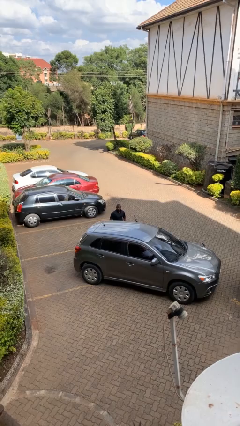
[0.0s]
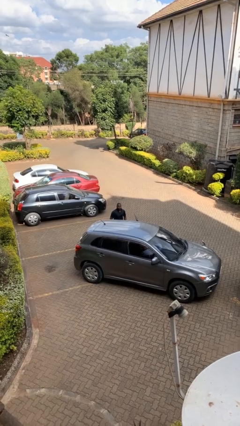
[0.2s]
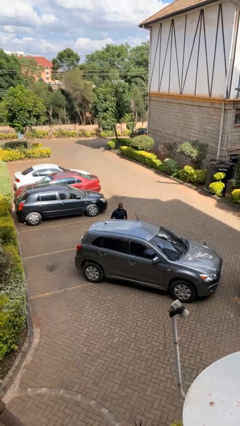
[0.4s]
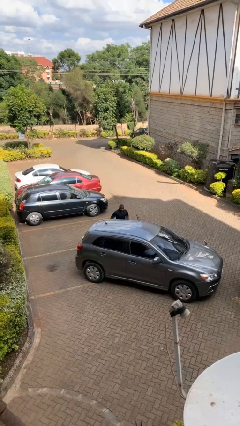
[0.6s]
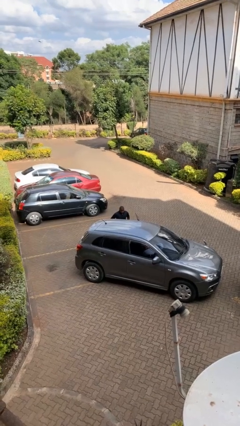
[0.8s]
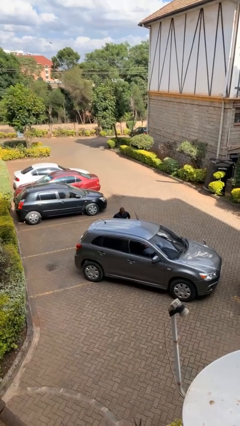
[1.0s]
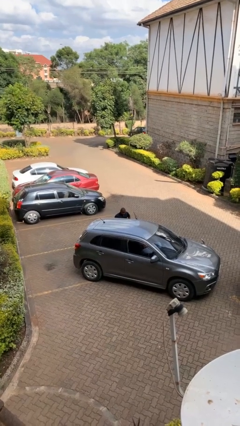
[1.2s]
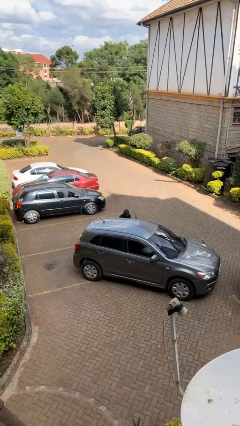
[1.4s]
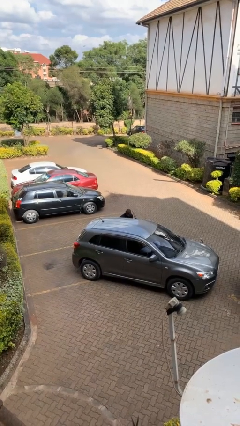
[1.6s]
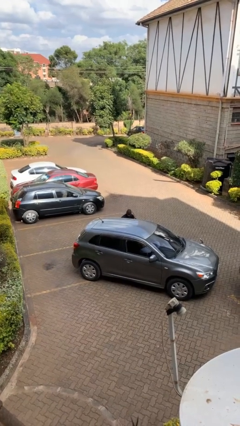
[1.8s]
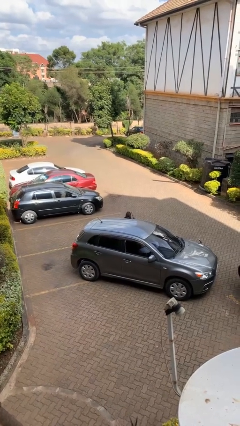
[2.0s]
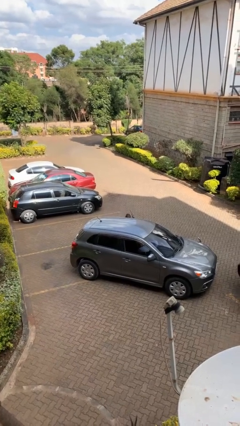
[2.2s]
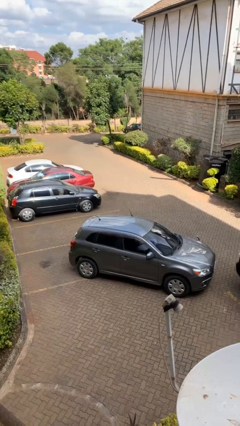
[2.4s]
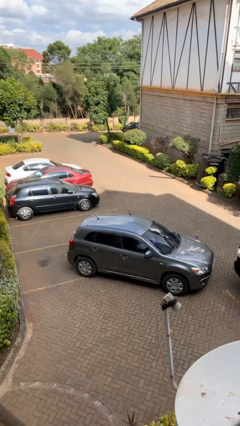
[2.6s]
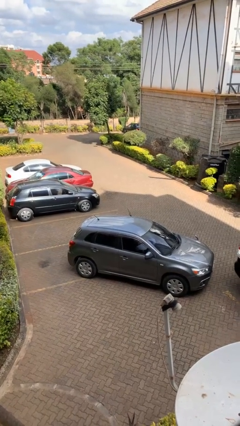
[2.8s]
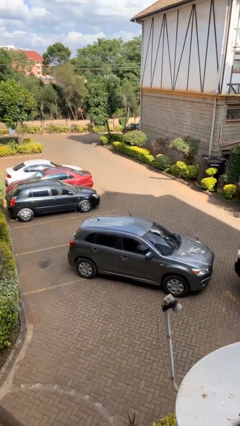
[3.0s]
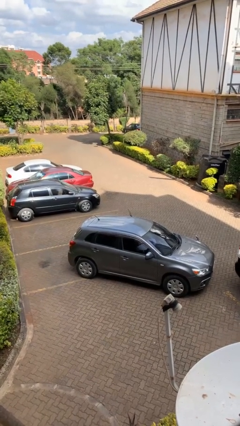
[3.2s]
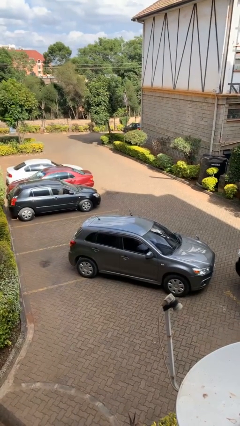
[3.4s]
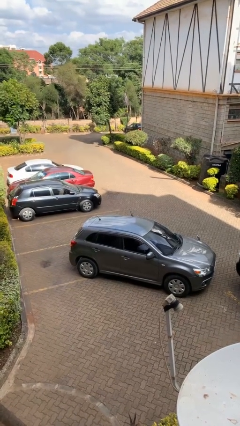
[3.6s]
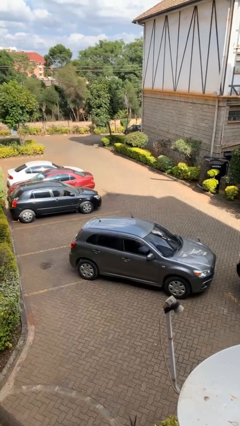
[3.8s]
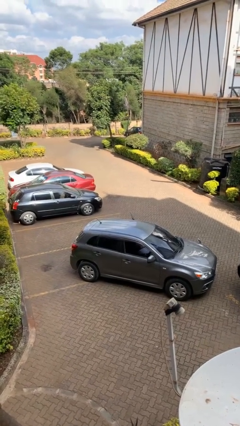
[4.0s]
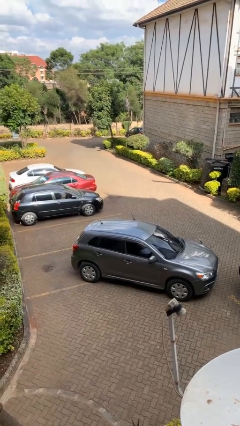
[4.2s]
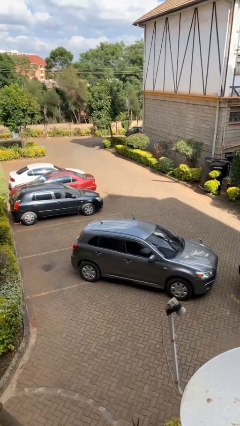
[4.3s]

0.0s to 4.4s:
person enters car

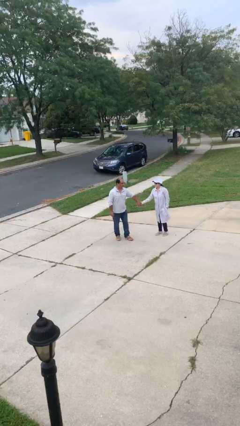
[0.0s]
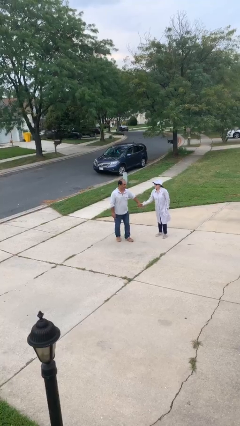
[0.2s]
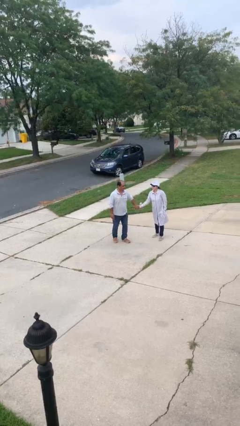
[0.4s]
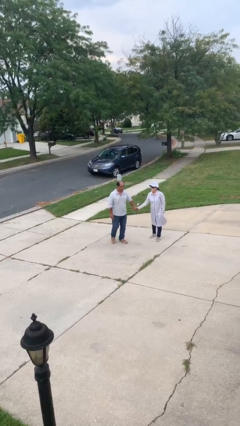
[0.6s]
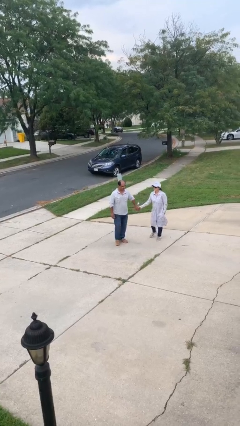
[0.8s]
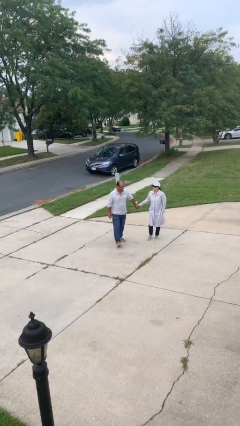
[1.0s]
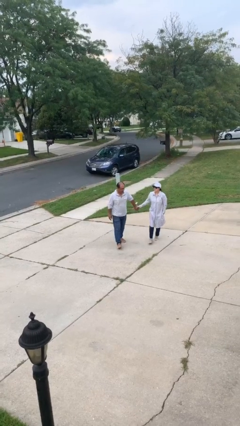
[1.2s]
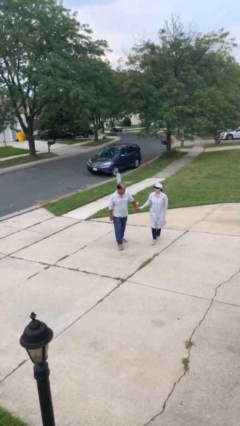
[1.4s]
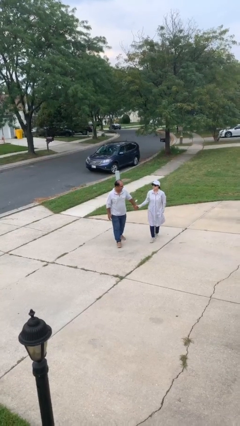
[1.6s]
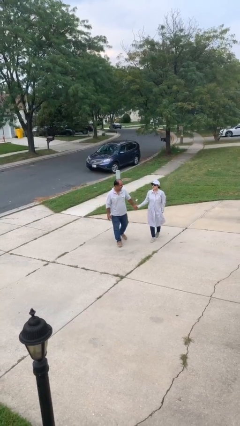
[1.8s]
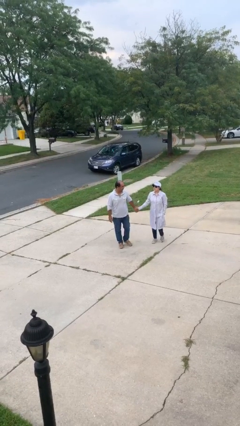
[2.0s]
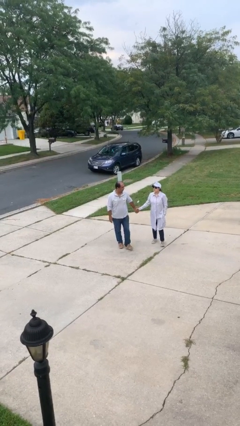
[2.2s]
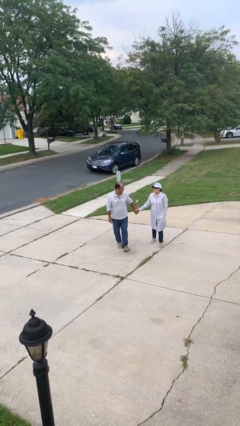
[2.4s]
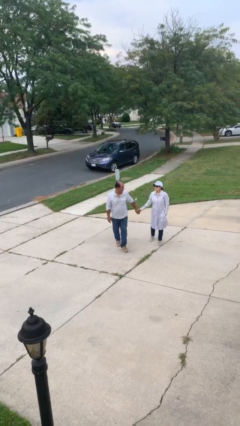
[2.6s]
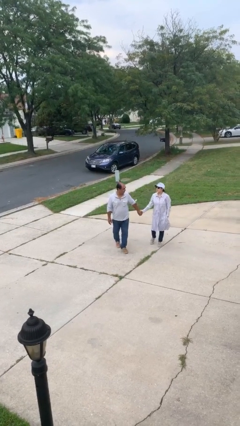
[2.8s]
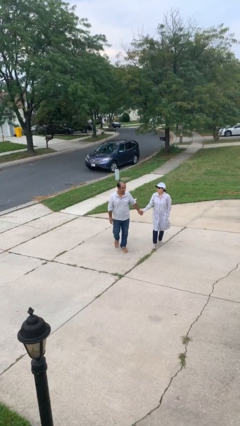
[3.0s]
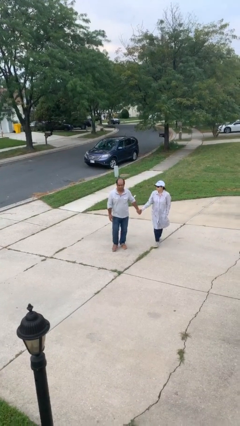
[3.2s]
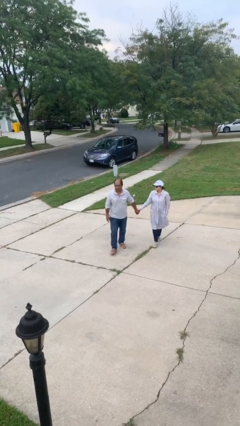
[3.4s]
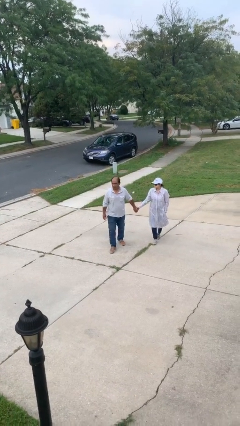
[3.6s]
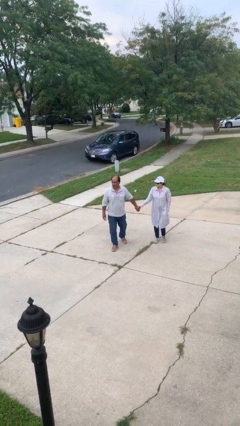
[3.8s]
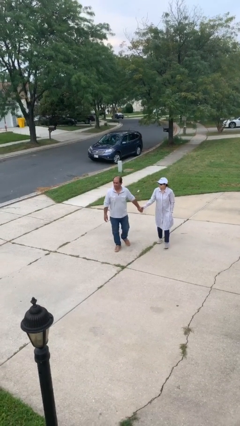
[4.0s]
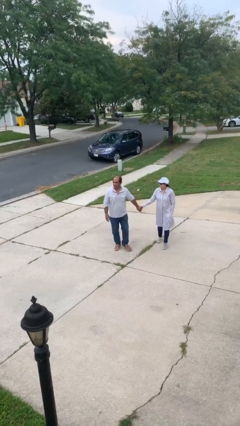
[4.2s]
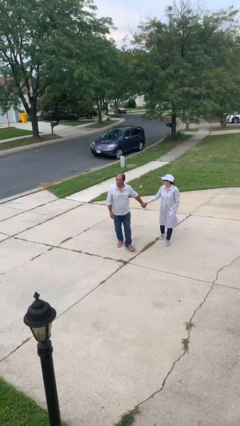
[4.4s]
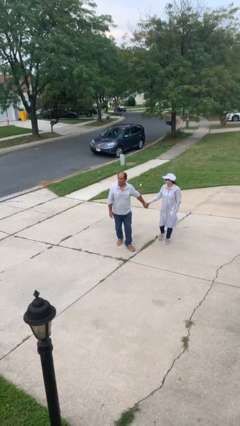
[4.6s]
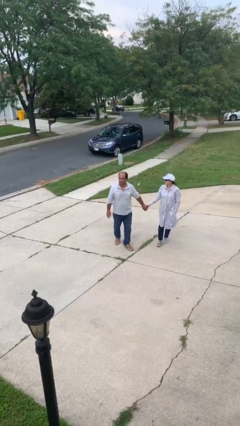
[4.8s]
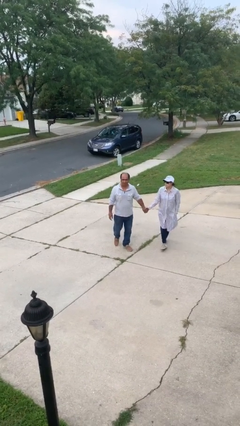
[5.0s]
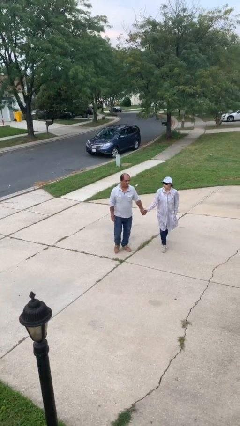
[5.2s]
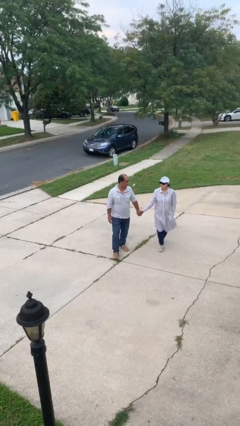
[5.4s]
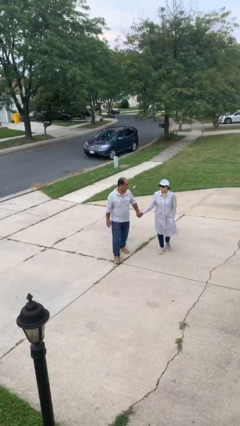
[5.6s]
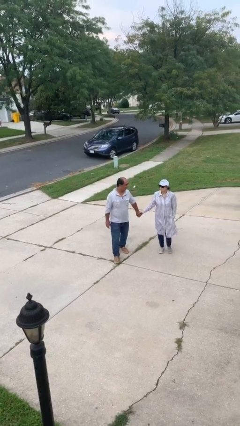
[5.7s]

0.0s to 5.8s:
person holds hand

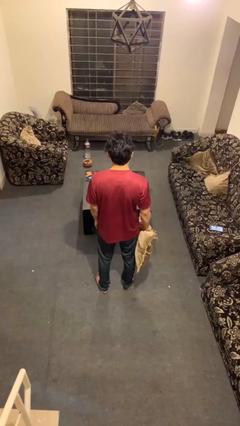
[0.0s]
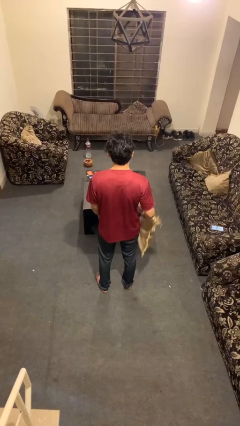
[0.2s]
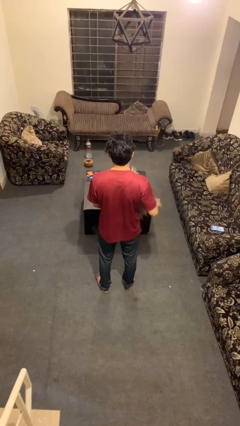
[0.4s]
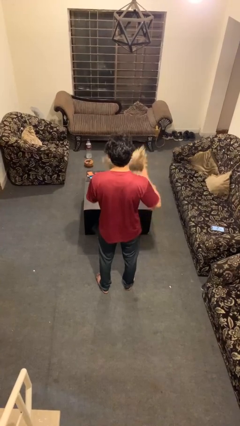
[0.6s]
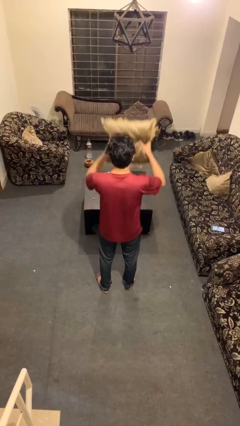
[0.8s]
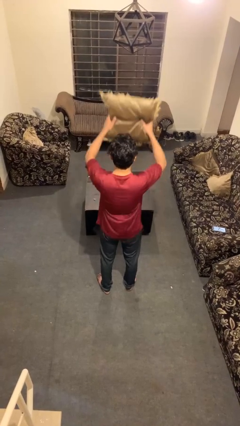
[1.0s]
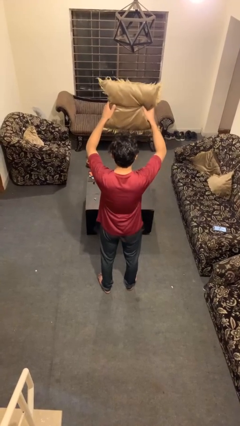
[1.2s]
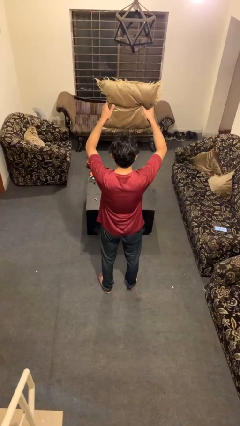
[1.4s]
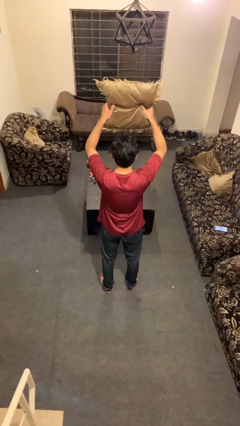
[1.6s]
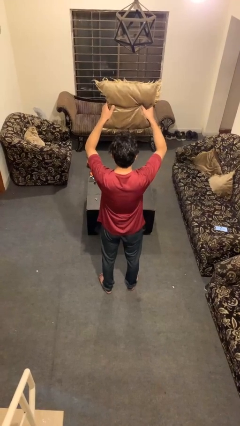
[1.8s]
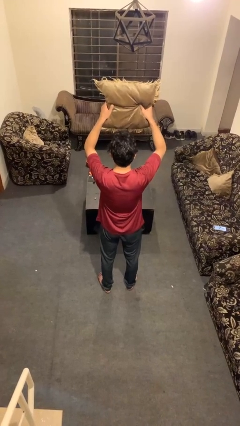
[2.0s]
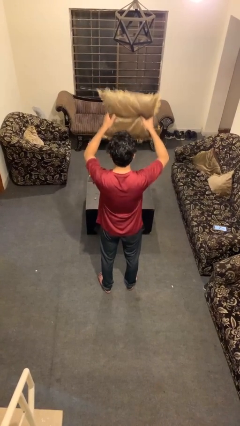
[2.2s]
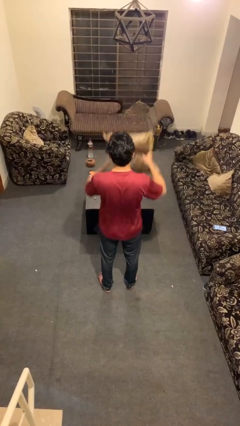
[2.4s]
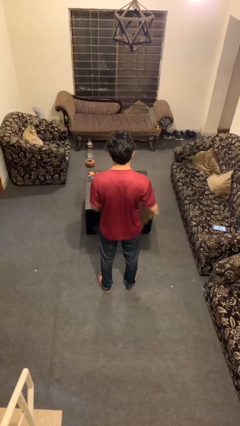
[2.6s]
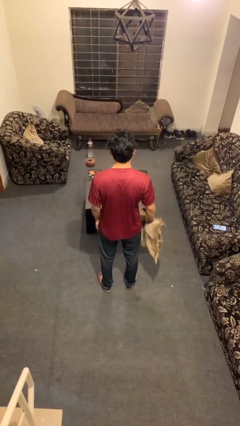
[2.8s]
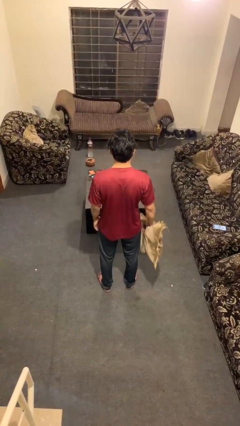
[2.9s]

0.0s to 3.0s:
person holds object above head

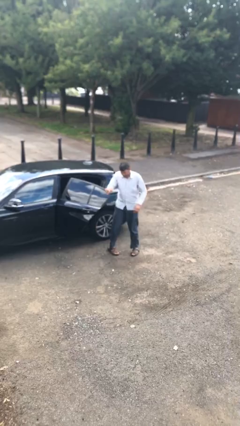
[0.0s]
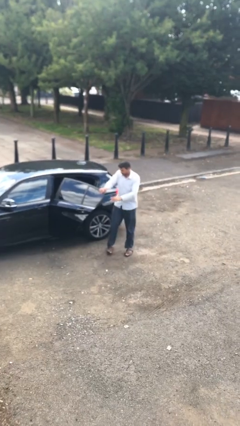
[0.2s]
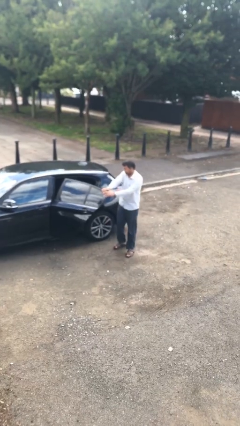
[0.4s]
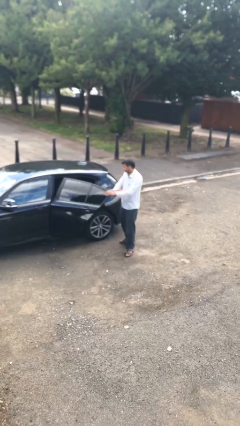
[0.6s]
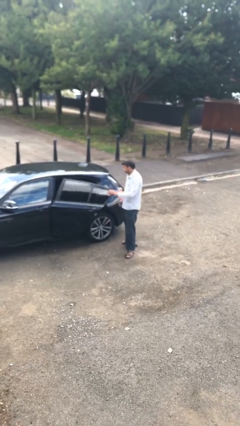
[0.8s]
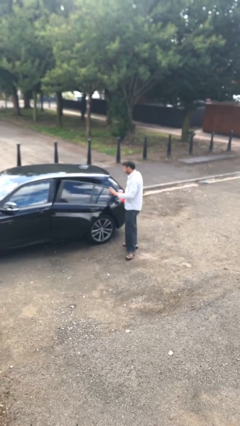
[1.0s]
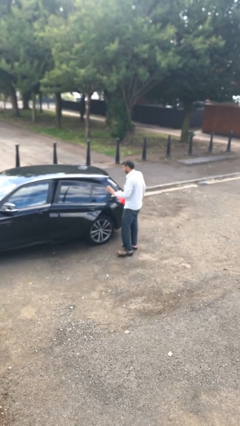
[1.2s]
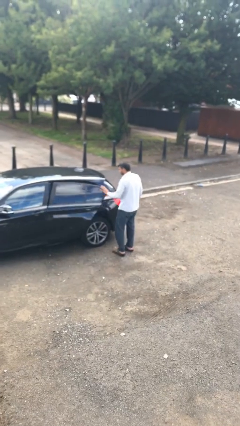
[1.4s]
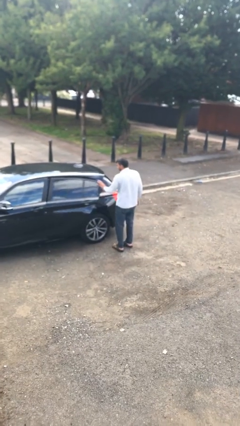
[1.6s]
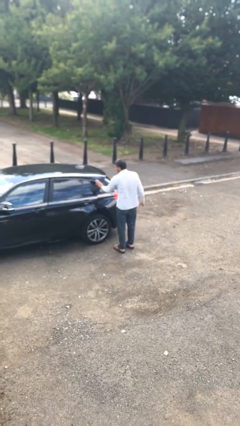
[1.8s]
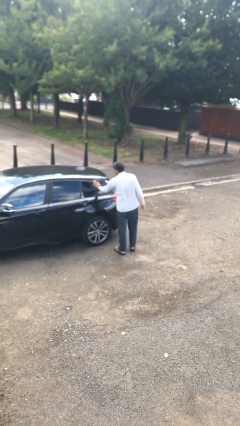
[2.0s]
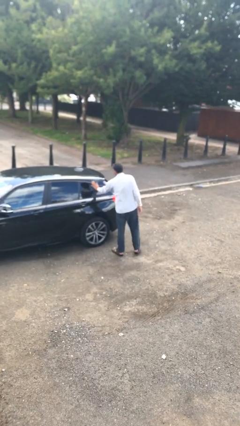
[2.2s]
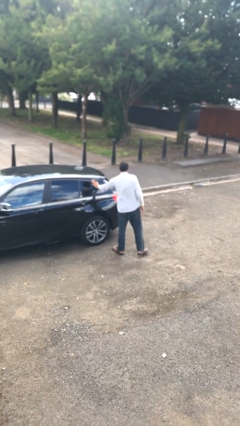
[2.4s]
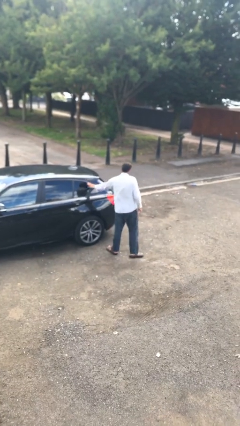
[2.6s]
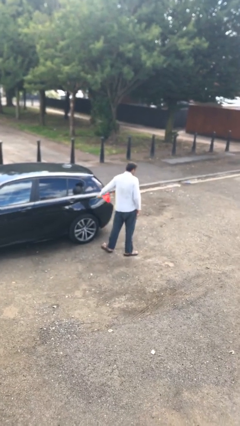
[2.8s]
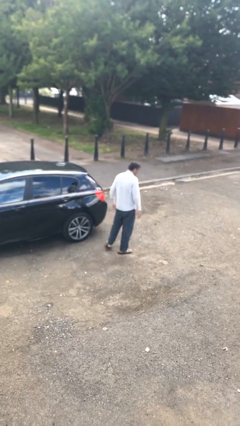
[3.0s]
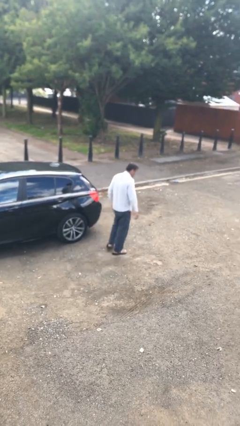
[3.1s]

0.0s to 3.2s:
person closes car door

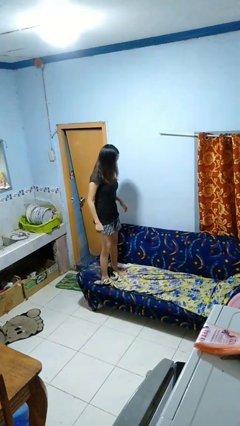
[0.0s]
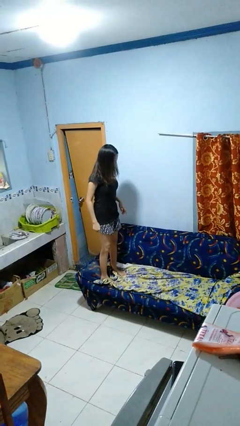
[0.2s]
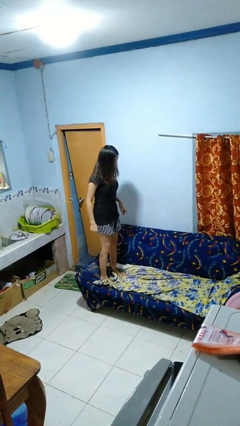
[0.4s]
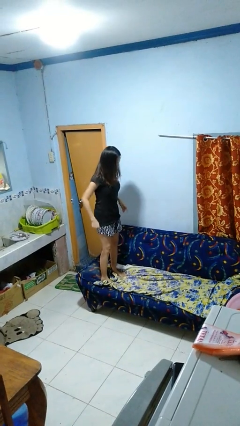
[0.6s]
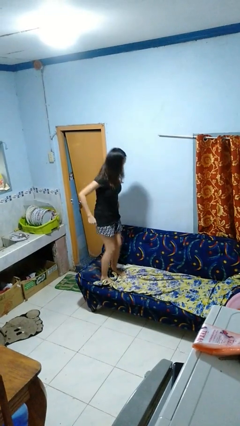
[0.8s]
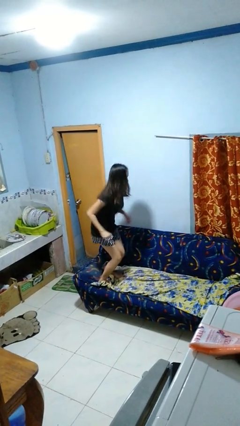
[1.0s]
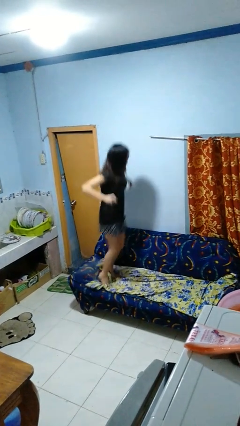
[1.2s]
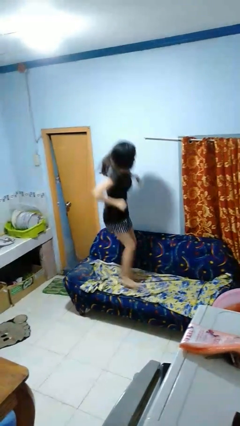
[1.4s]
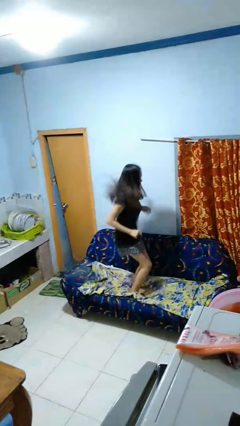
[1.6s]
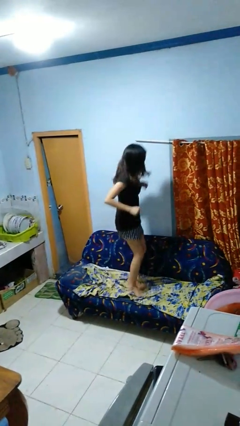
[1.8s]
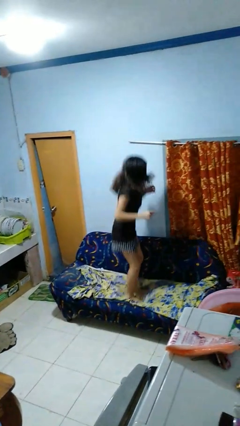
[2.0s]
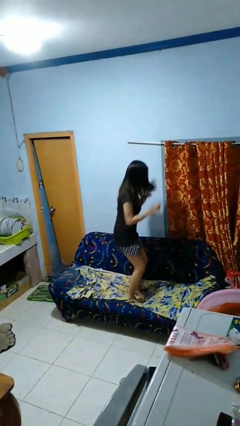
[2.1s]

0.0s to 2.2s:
person jumps on couch
